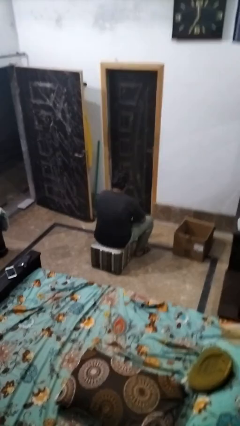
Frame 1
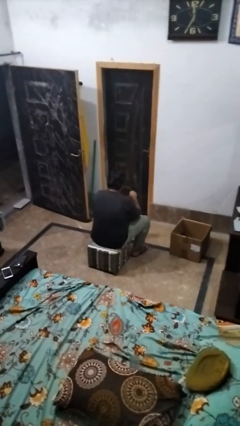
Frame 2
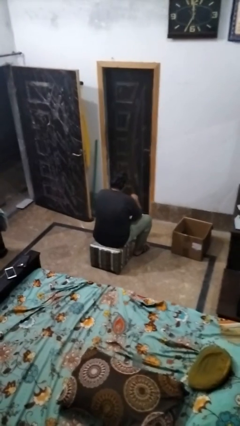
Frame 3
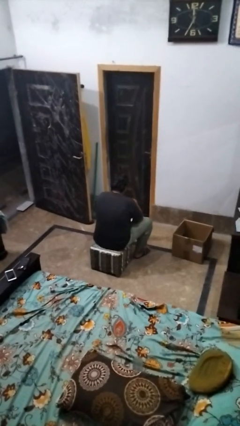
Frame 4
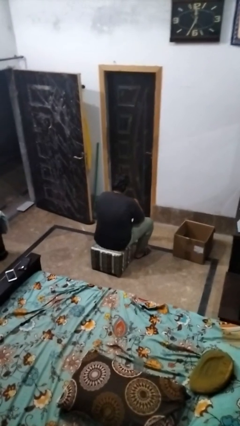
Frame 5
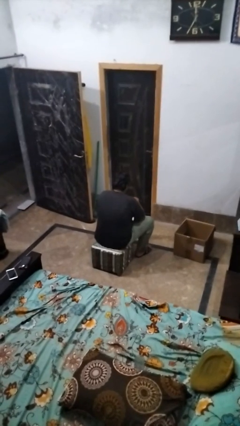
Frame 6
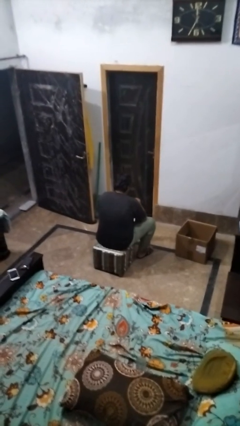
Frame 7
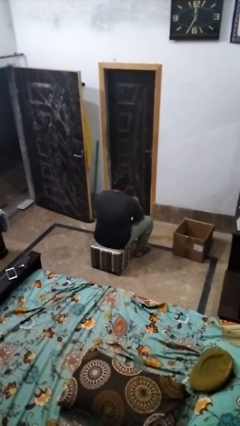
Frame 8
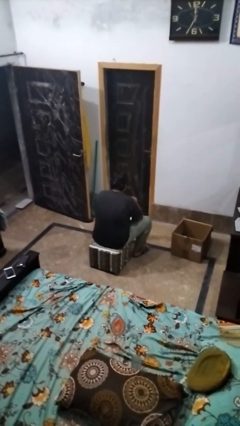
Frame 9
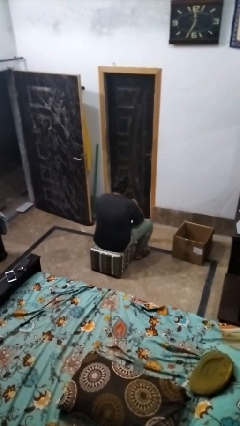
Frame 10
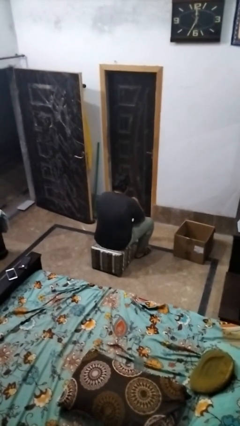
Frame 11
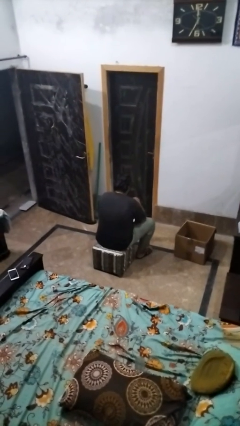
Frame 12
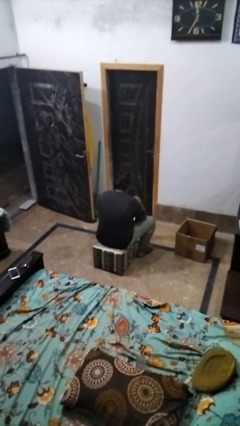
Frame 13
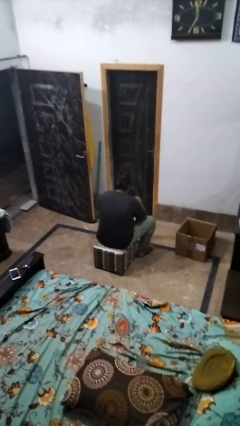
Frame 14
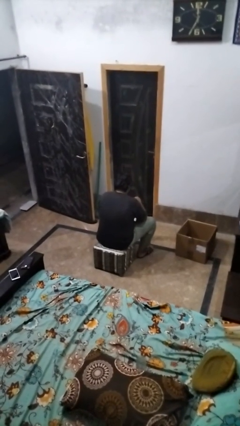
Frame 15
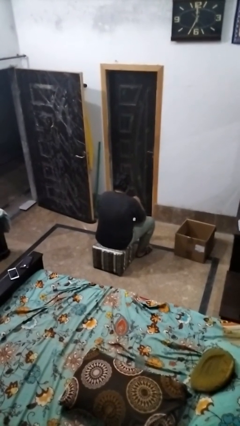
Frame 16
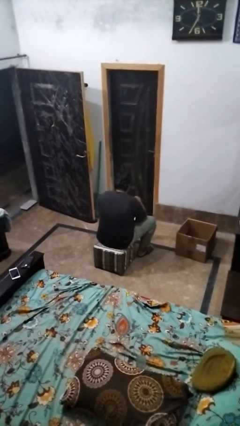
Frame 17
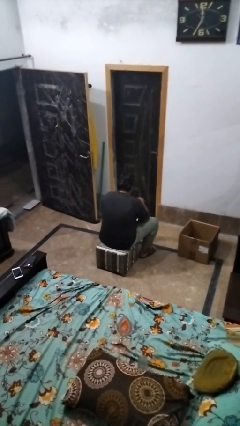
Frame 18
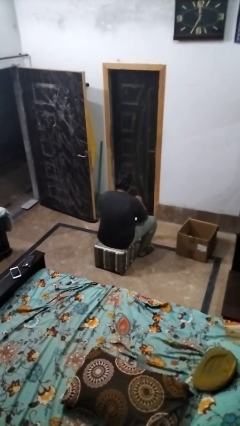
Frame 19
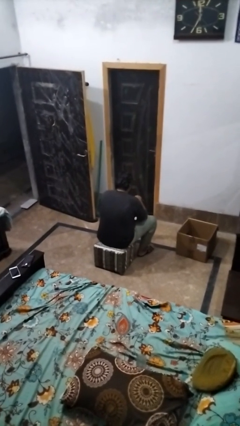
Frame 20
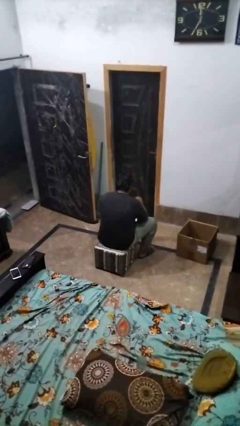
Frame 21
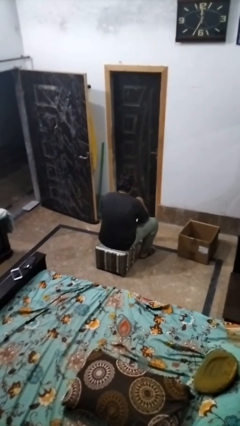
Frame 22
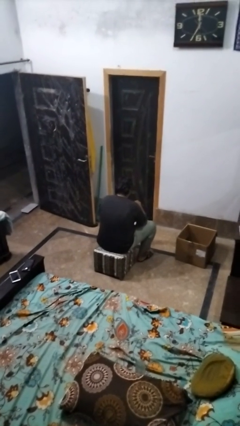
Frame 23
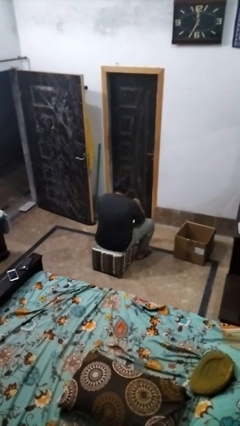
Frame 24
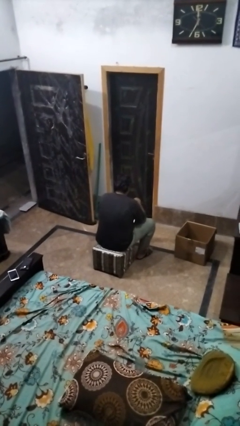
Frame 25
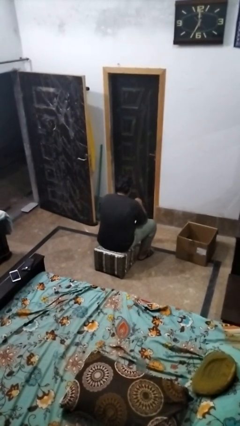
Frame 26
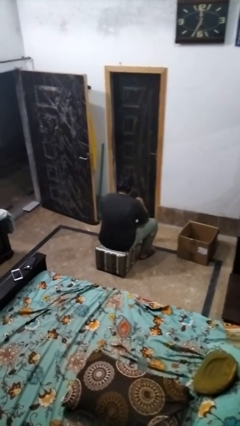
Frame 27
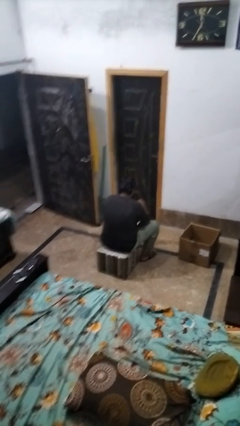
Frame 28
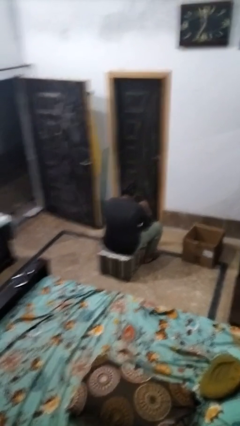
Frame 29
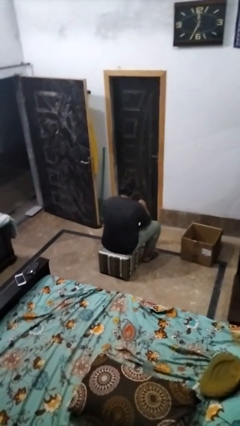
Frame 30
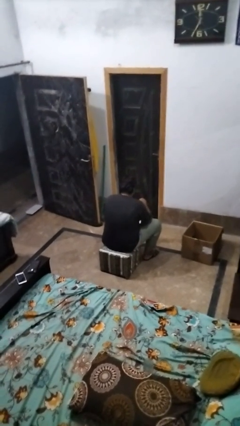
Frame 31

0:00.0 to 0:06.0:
person stirs mug

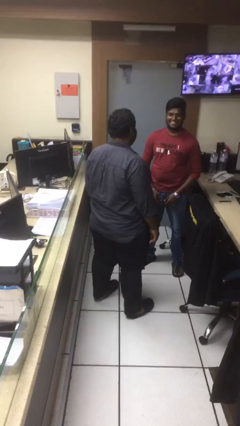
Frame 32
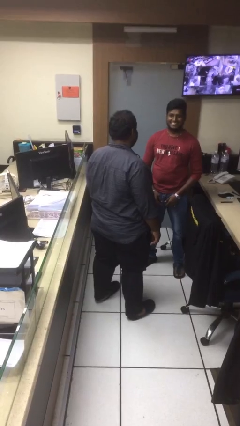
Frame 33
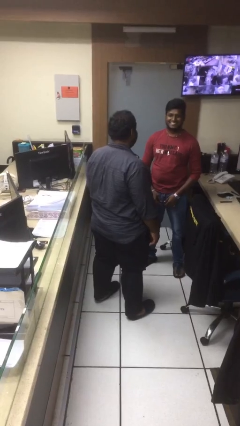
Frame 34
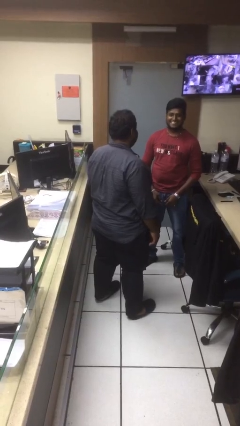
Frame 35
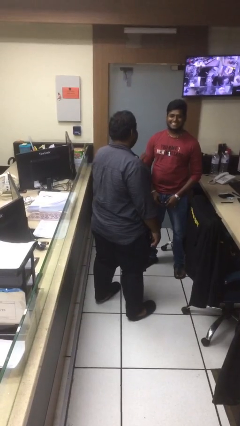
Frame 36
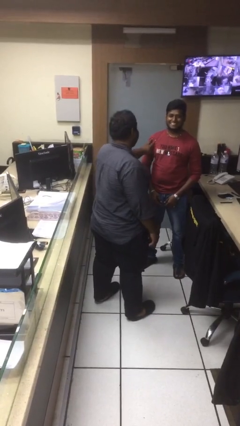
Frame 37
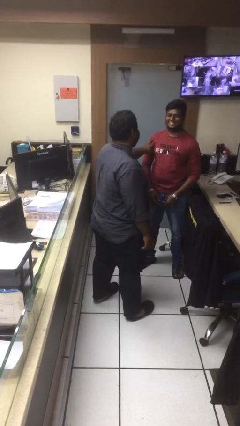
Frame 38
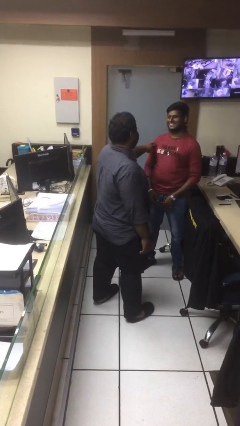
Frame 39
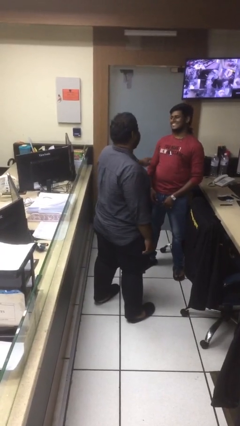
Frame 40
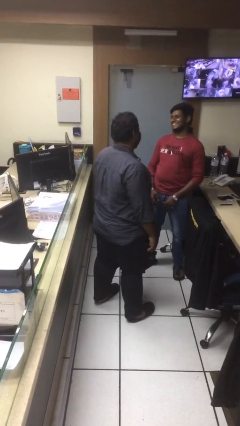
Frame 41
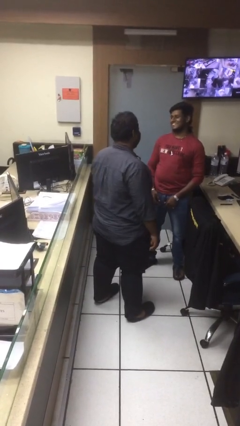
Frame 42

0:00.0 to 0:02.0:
person shoves person

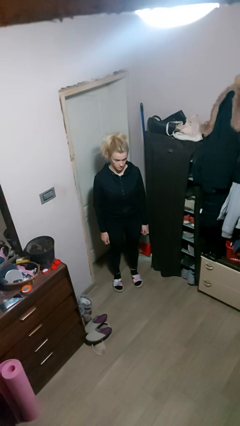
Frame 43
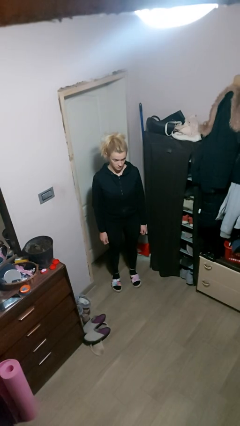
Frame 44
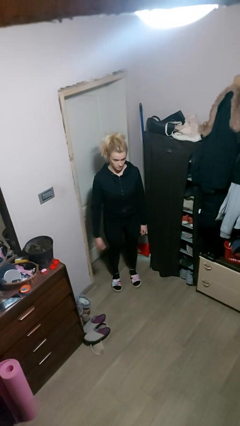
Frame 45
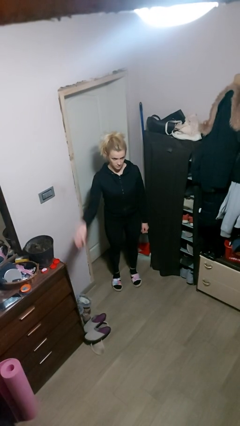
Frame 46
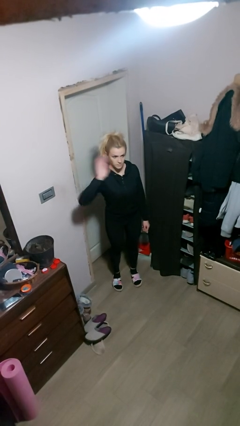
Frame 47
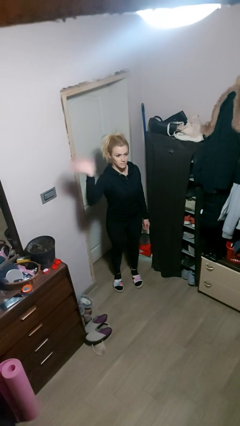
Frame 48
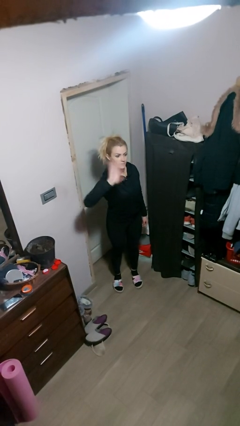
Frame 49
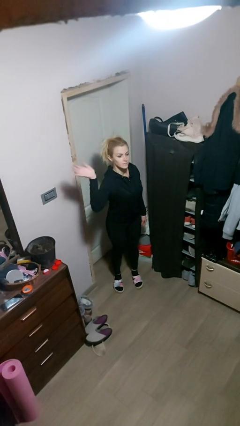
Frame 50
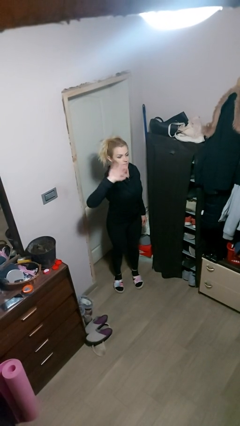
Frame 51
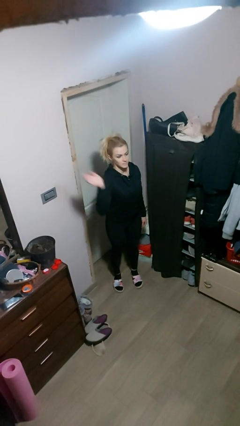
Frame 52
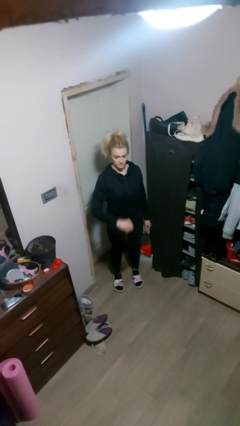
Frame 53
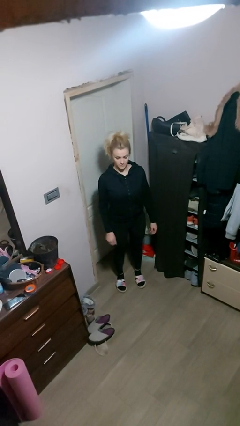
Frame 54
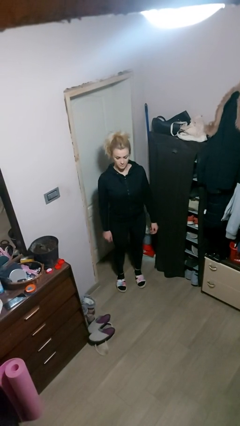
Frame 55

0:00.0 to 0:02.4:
person waves at person

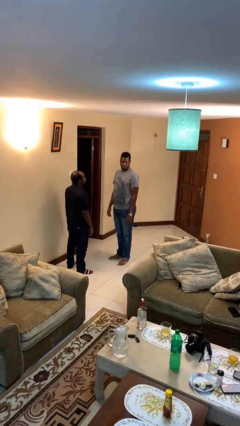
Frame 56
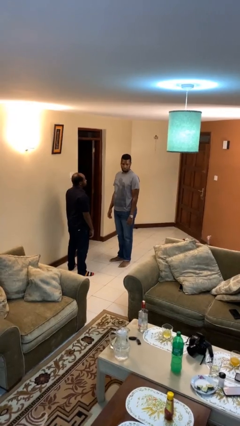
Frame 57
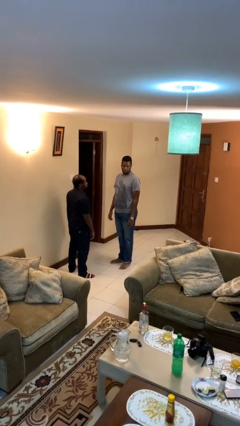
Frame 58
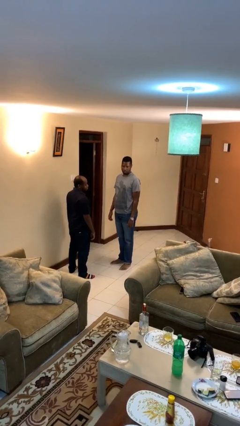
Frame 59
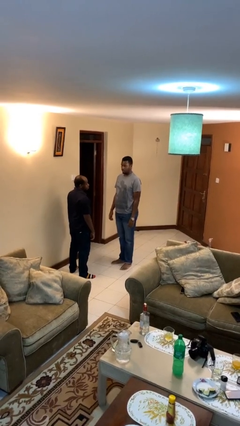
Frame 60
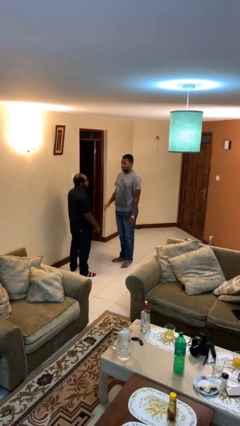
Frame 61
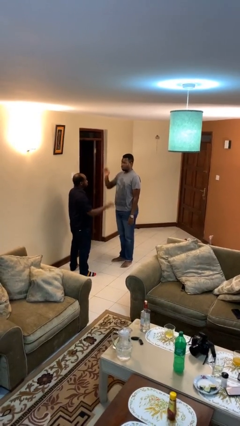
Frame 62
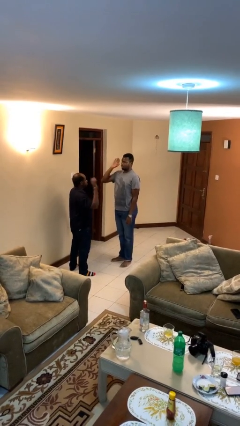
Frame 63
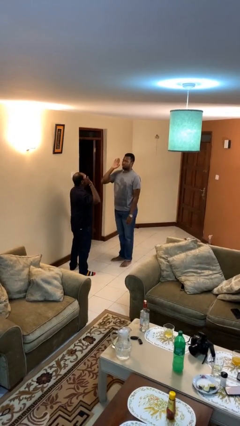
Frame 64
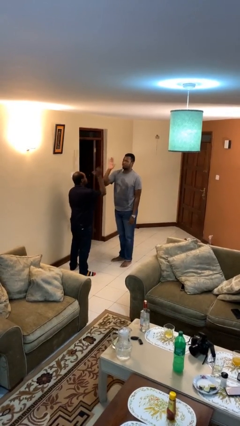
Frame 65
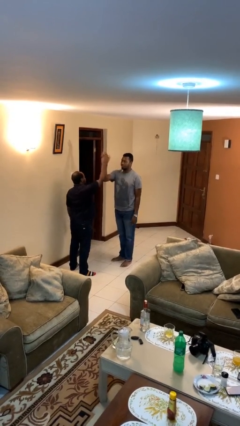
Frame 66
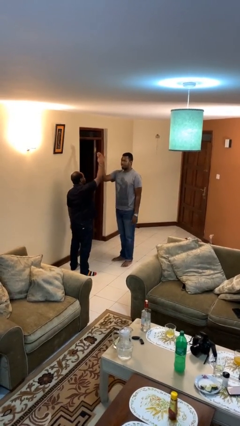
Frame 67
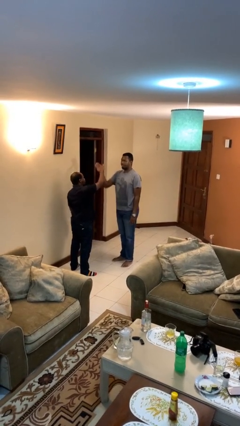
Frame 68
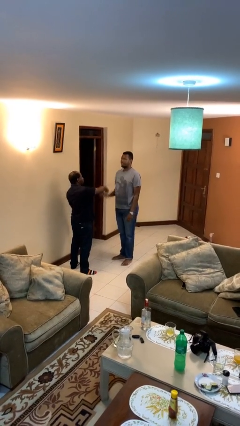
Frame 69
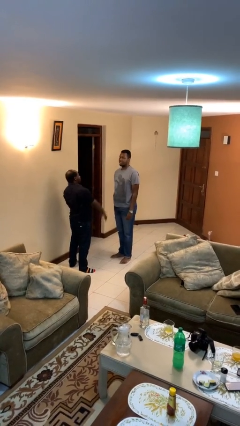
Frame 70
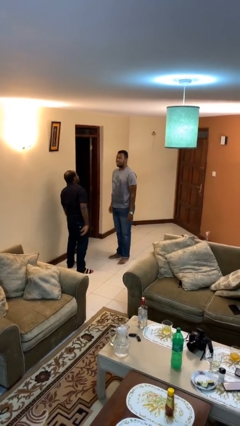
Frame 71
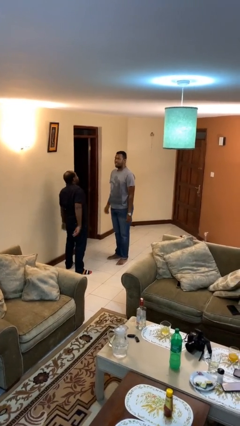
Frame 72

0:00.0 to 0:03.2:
person highfives hand

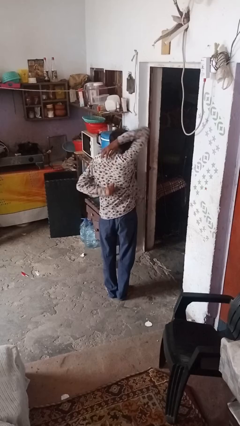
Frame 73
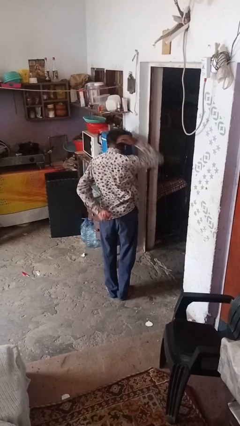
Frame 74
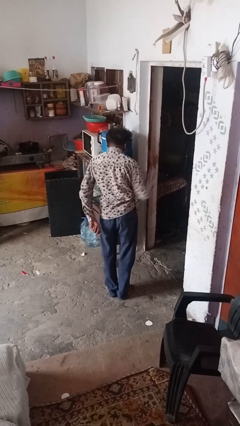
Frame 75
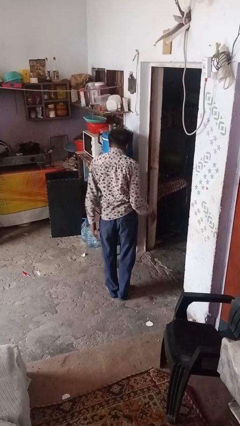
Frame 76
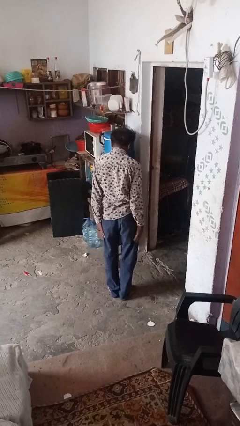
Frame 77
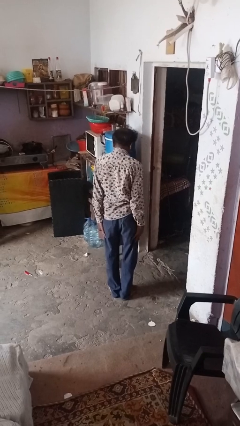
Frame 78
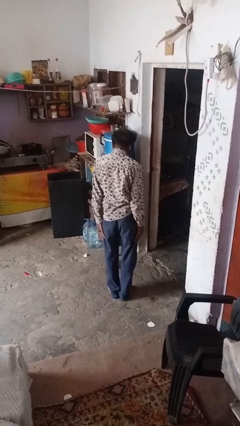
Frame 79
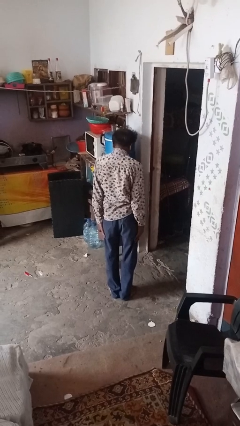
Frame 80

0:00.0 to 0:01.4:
person stretches arms over head

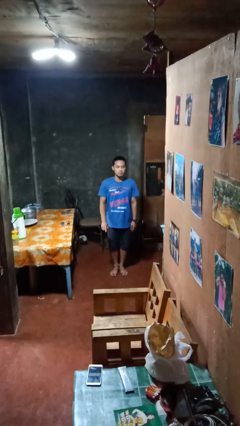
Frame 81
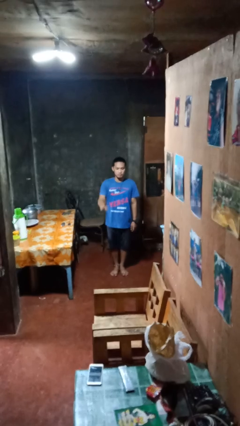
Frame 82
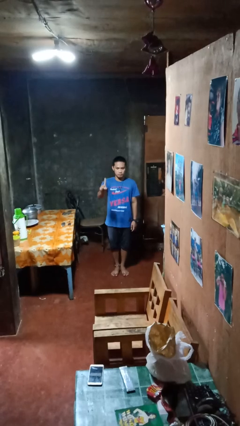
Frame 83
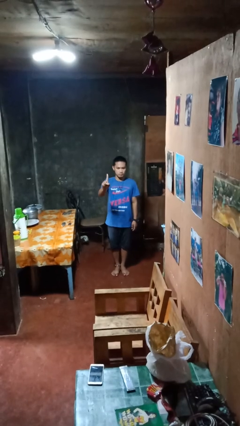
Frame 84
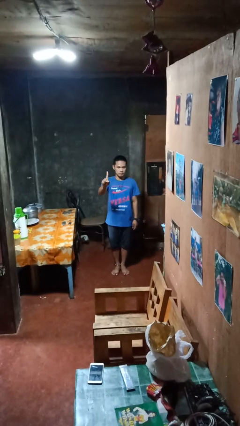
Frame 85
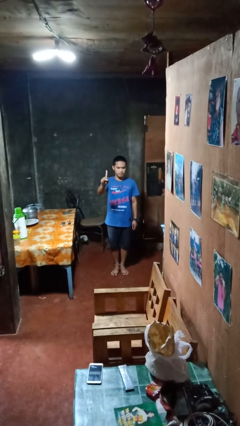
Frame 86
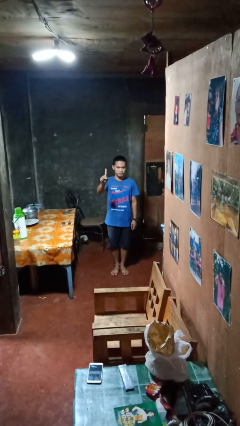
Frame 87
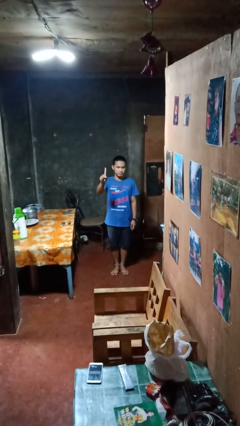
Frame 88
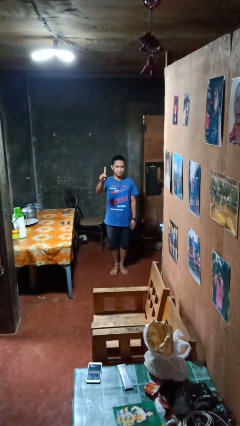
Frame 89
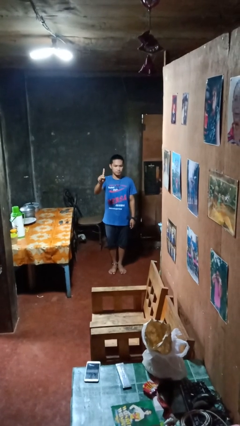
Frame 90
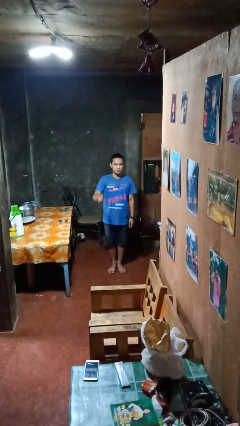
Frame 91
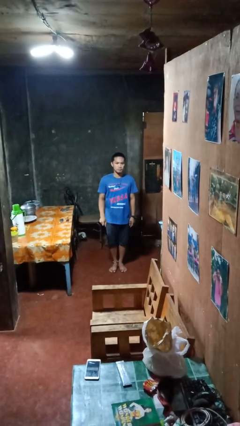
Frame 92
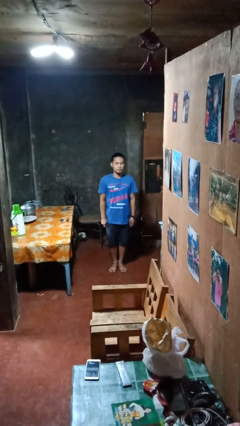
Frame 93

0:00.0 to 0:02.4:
person gestures number one
